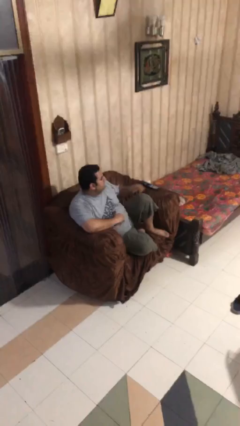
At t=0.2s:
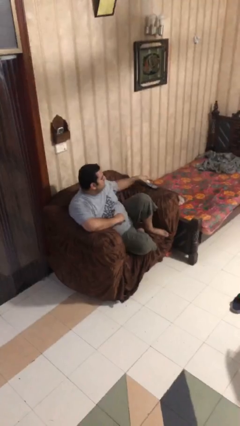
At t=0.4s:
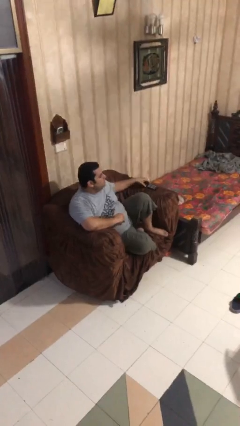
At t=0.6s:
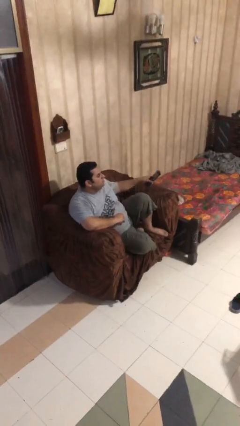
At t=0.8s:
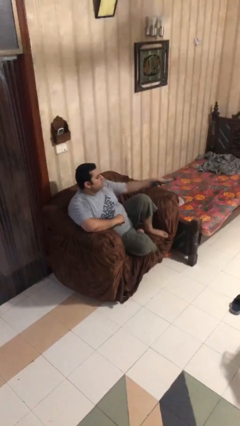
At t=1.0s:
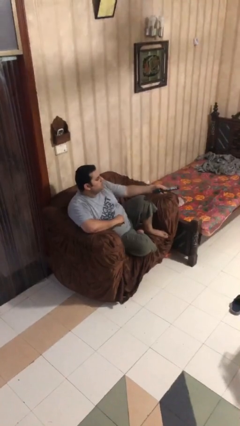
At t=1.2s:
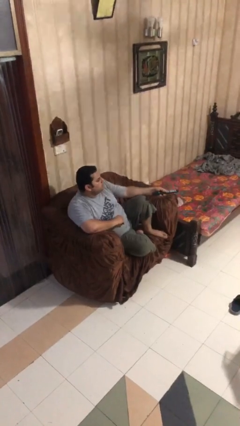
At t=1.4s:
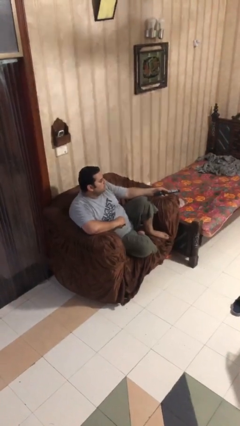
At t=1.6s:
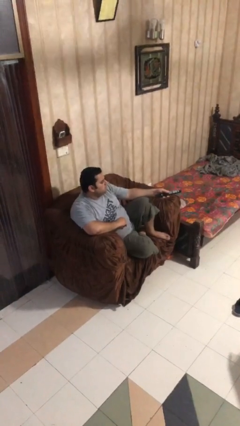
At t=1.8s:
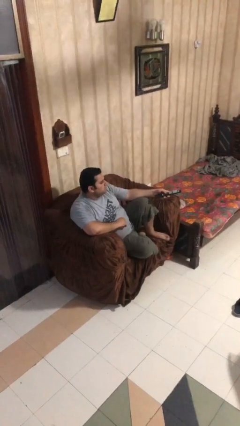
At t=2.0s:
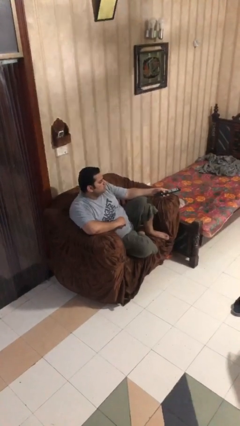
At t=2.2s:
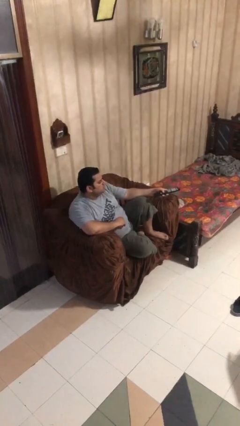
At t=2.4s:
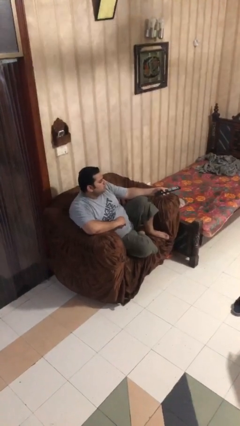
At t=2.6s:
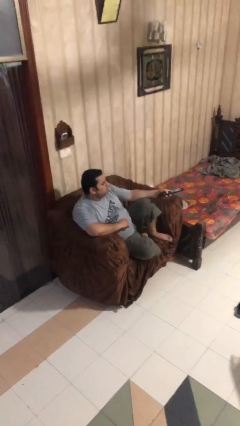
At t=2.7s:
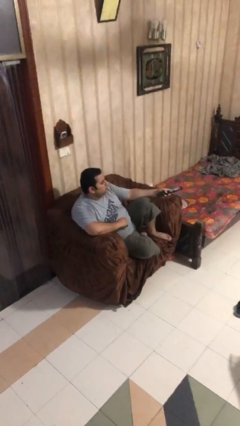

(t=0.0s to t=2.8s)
person uses television remote

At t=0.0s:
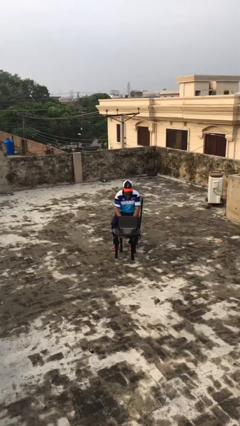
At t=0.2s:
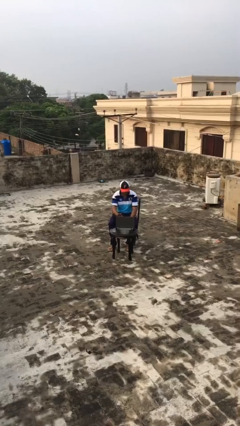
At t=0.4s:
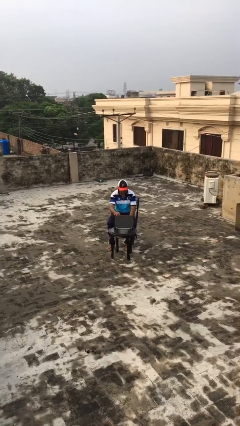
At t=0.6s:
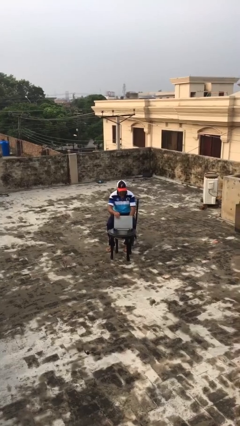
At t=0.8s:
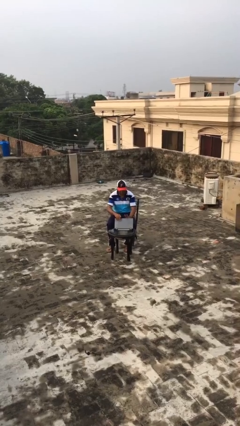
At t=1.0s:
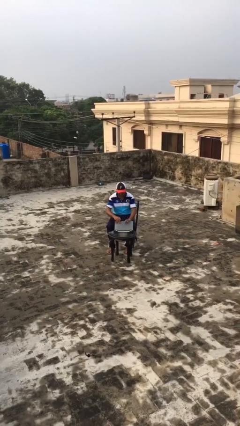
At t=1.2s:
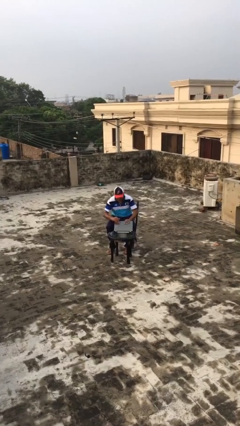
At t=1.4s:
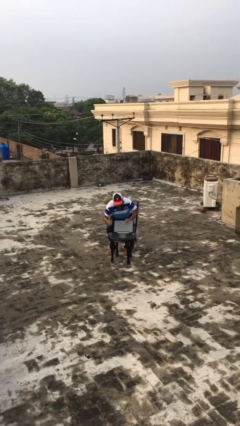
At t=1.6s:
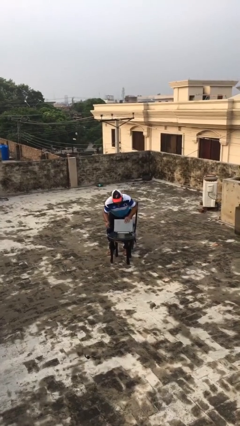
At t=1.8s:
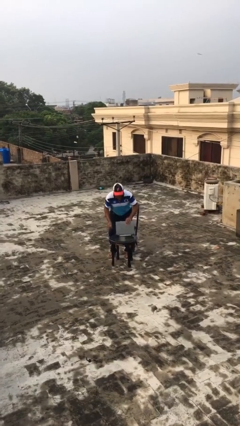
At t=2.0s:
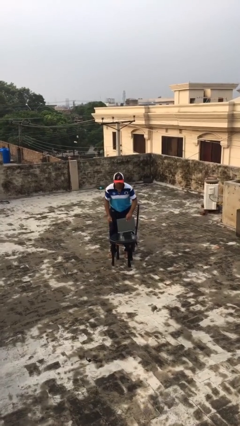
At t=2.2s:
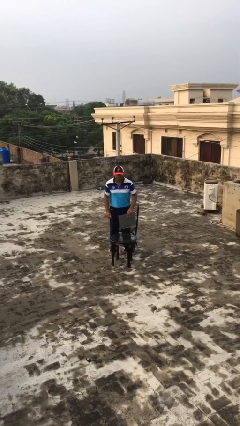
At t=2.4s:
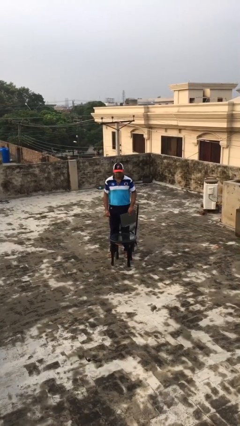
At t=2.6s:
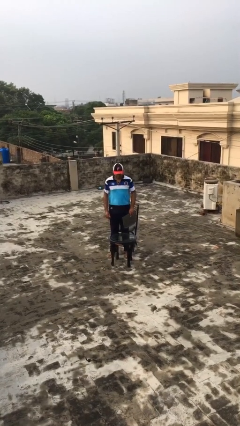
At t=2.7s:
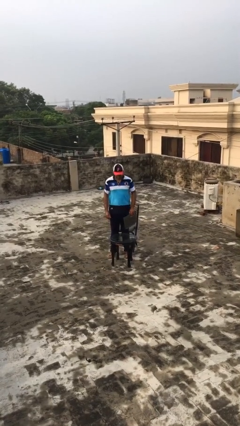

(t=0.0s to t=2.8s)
person stands up

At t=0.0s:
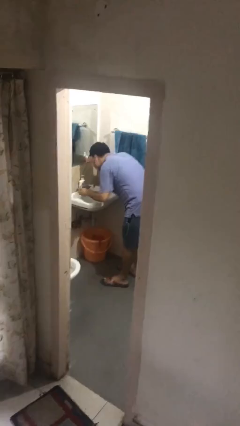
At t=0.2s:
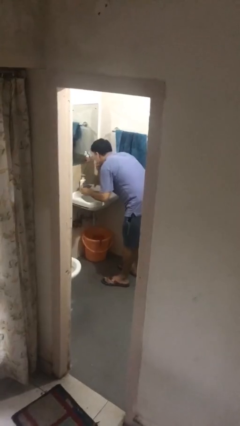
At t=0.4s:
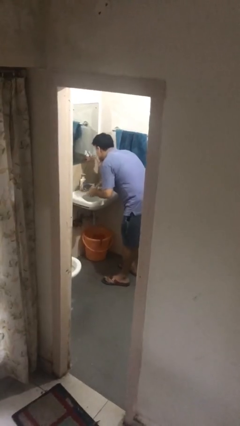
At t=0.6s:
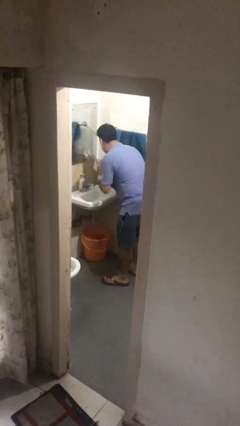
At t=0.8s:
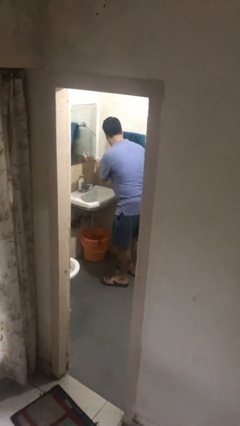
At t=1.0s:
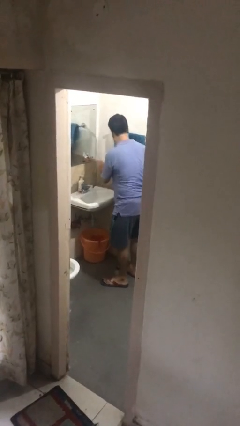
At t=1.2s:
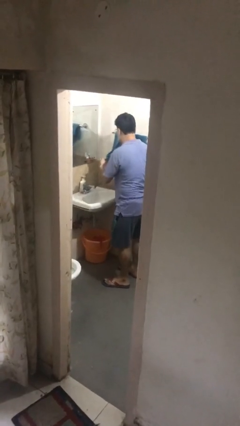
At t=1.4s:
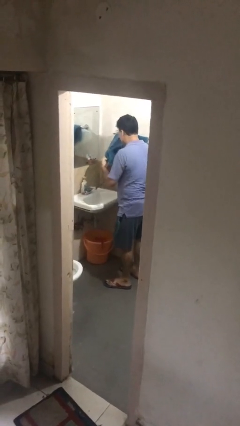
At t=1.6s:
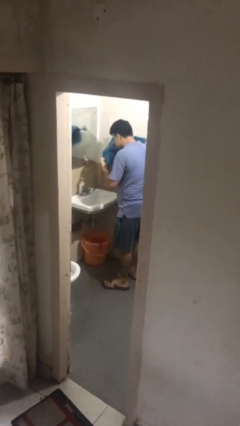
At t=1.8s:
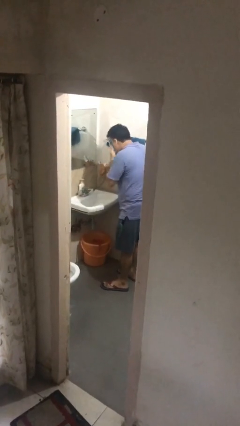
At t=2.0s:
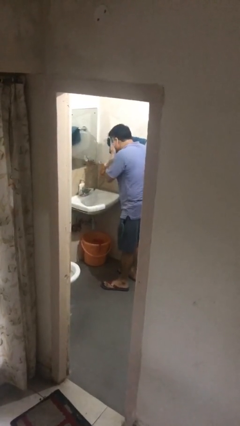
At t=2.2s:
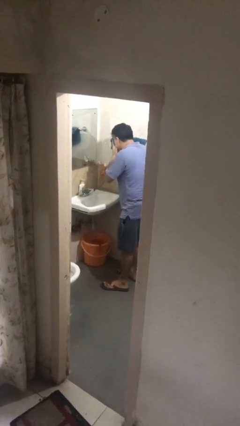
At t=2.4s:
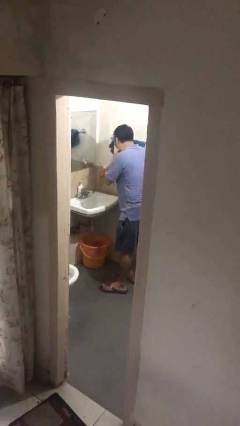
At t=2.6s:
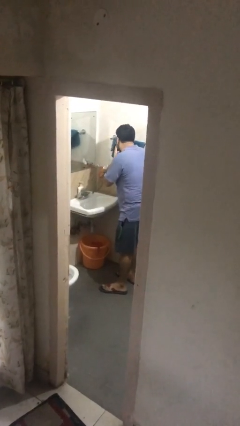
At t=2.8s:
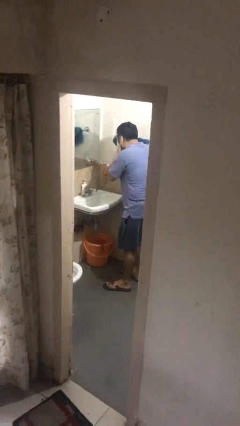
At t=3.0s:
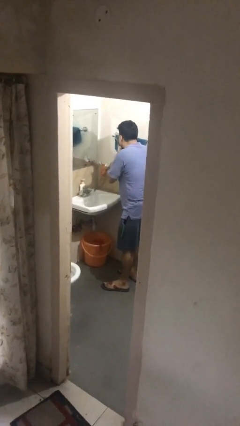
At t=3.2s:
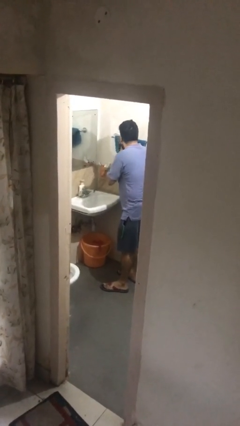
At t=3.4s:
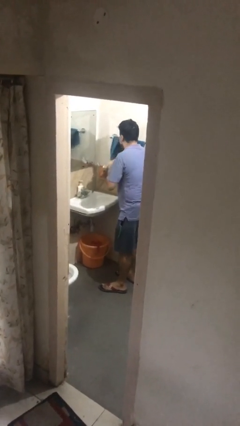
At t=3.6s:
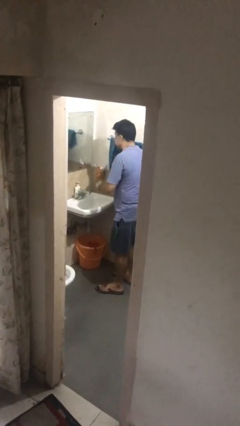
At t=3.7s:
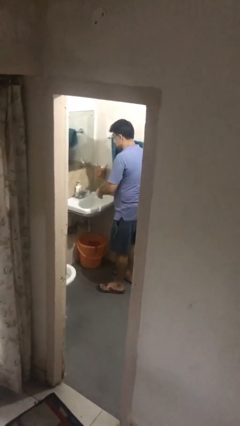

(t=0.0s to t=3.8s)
person dries face with towel

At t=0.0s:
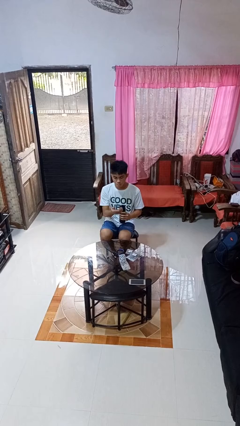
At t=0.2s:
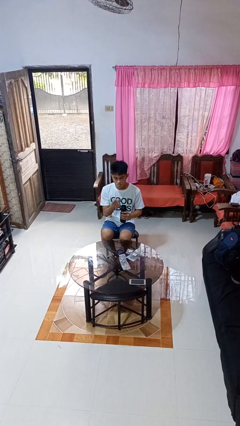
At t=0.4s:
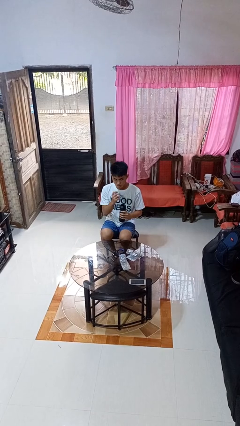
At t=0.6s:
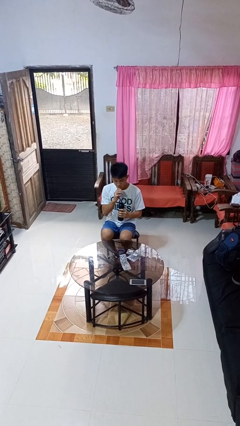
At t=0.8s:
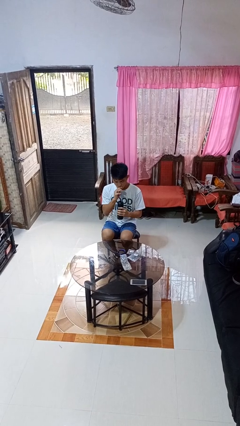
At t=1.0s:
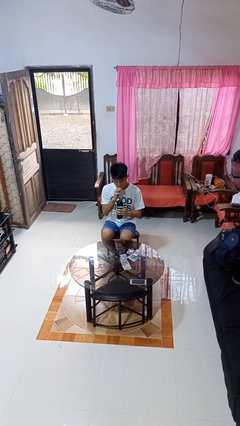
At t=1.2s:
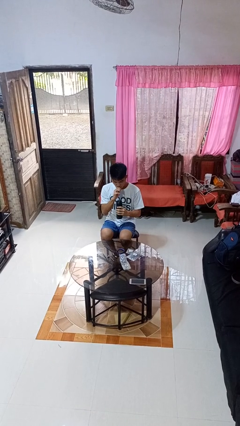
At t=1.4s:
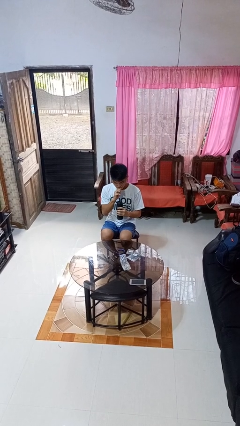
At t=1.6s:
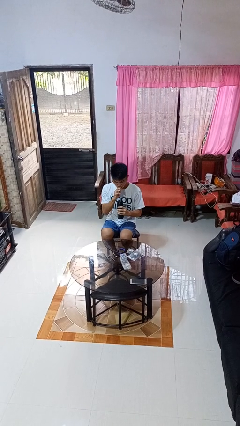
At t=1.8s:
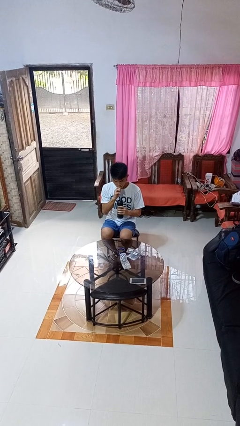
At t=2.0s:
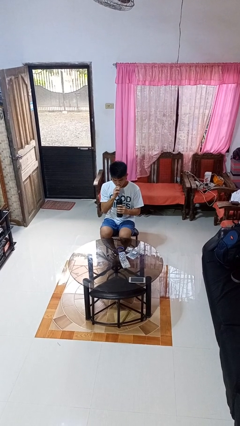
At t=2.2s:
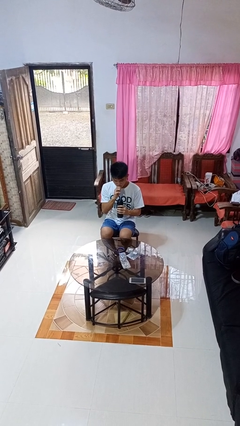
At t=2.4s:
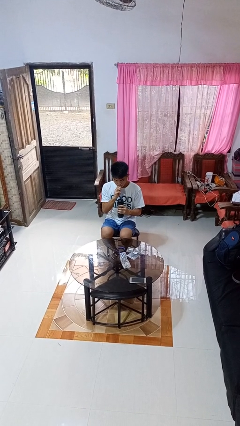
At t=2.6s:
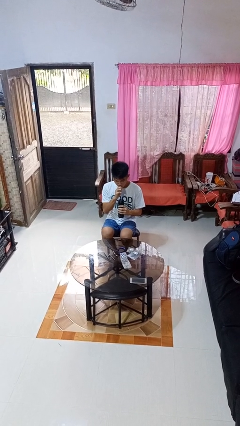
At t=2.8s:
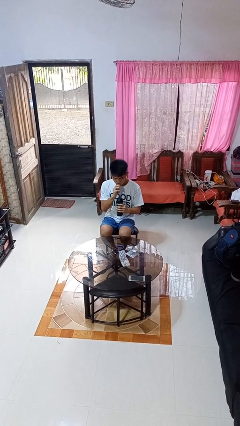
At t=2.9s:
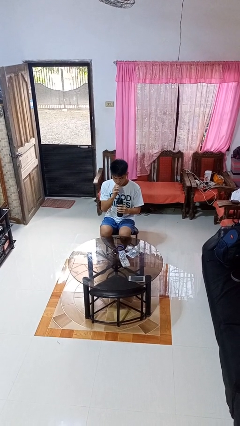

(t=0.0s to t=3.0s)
person drinks from straw

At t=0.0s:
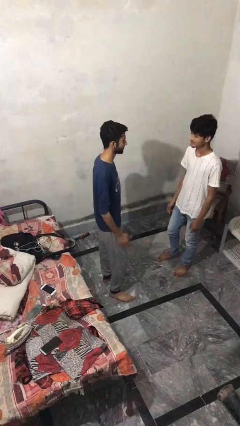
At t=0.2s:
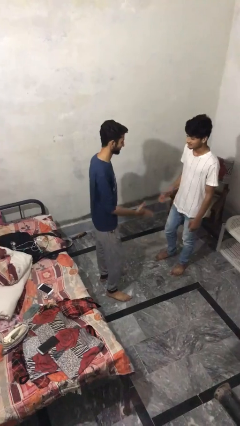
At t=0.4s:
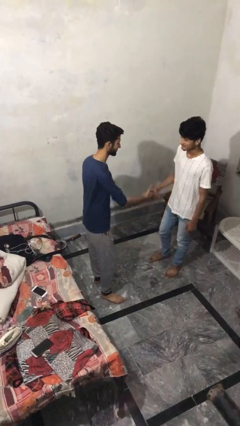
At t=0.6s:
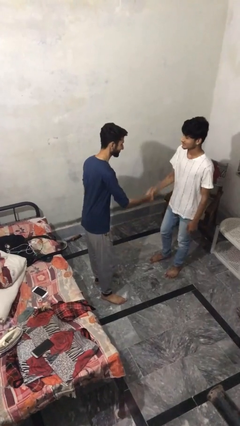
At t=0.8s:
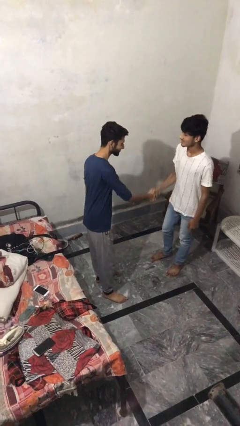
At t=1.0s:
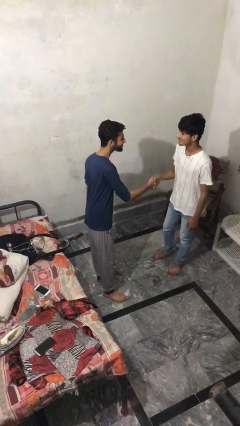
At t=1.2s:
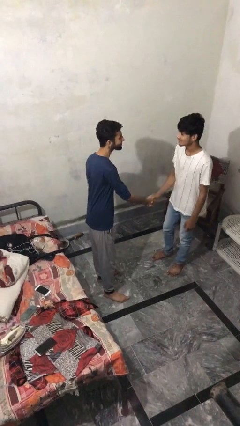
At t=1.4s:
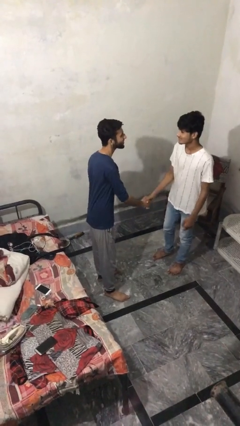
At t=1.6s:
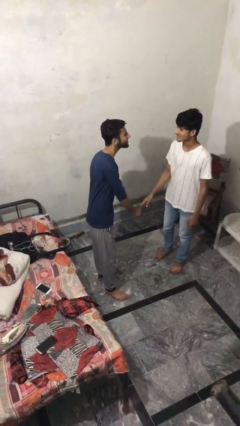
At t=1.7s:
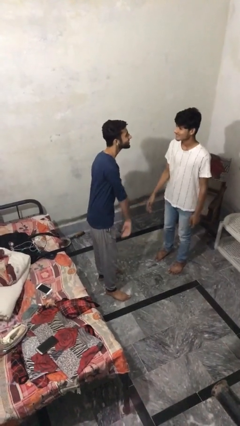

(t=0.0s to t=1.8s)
person shakes hand

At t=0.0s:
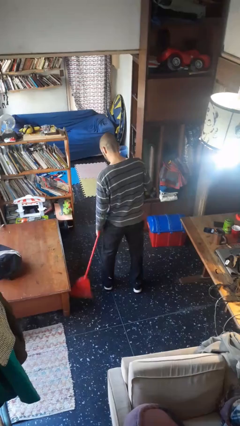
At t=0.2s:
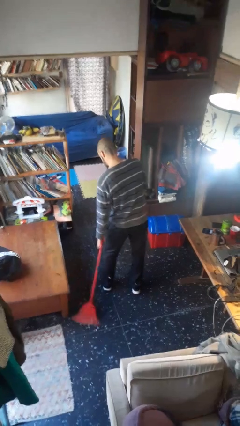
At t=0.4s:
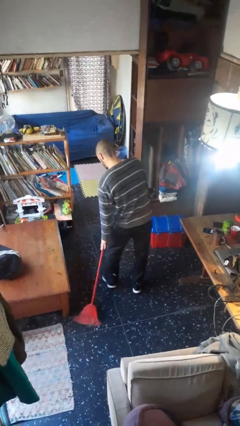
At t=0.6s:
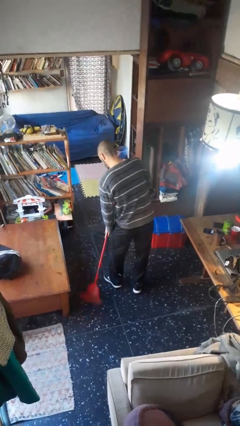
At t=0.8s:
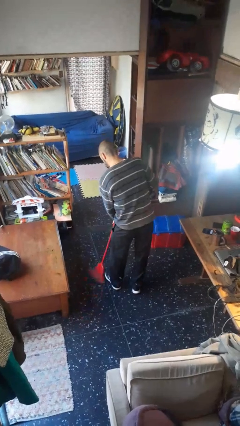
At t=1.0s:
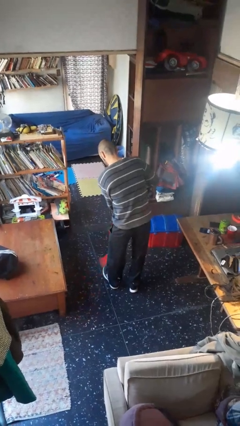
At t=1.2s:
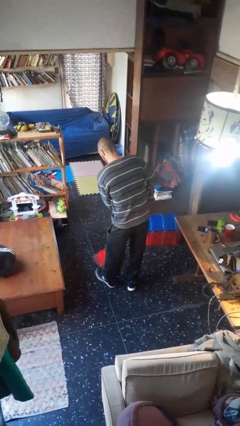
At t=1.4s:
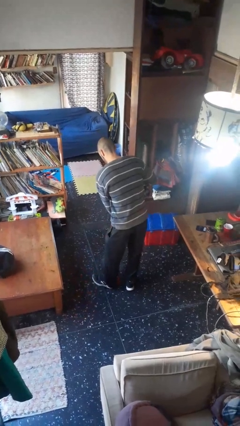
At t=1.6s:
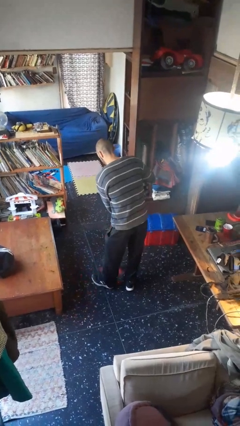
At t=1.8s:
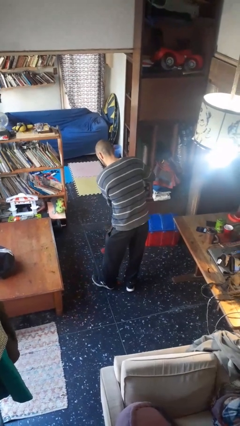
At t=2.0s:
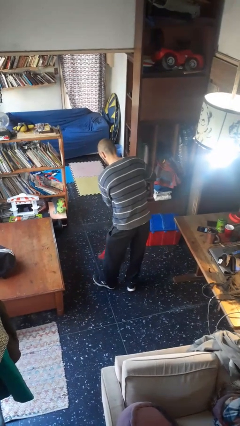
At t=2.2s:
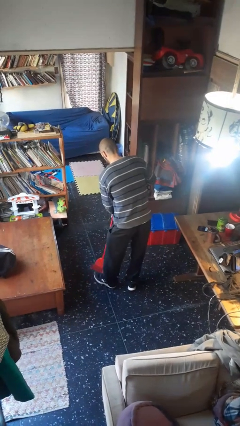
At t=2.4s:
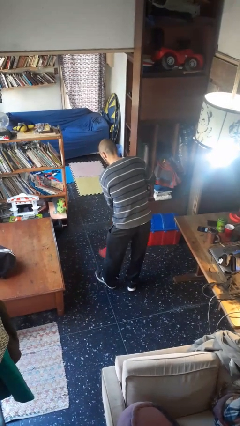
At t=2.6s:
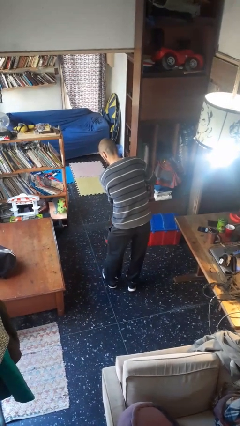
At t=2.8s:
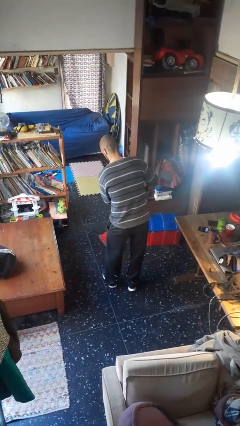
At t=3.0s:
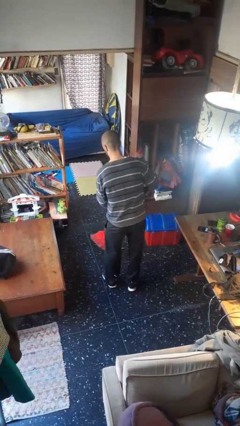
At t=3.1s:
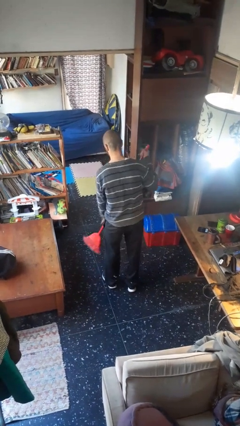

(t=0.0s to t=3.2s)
person sweeps floor
